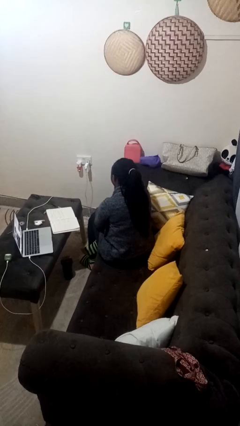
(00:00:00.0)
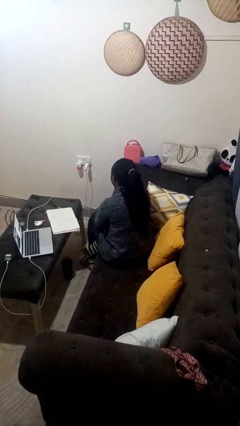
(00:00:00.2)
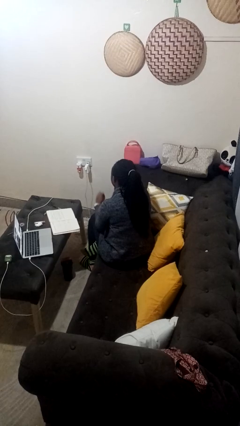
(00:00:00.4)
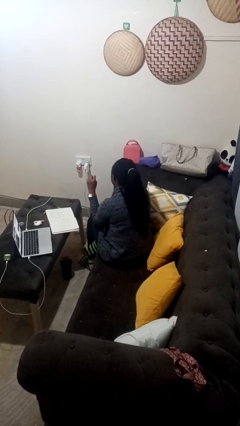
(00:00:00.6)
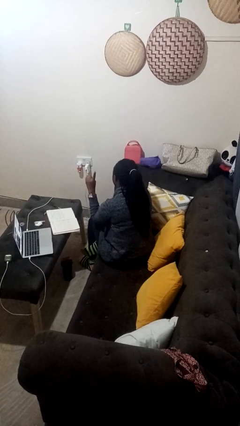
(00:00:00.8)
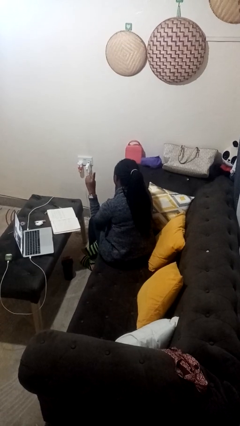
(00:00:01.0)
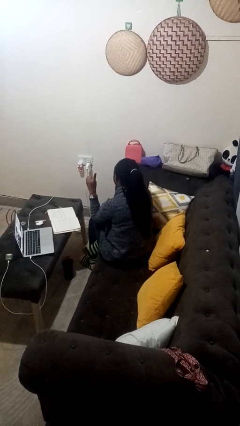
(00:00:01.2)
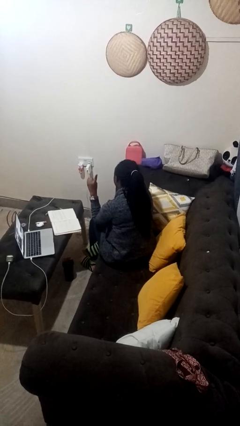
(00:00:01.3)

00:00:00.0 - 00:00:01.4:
person gestures number one

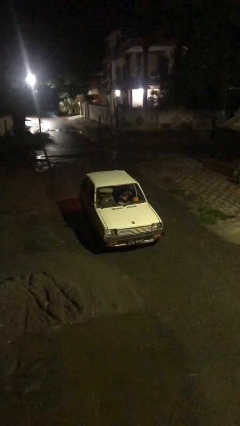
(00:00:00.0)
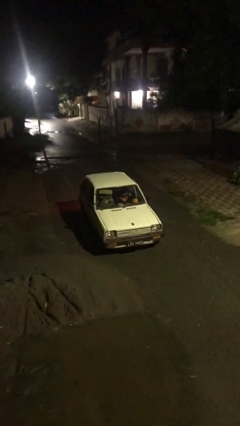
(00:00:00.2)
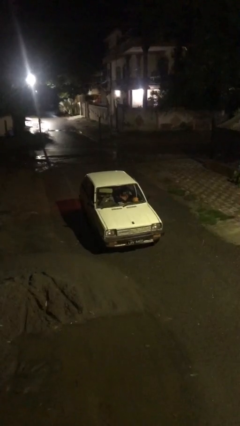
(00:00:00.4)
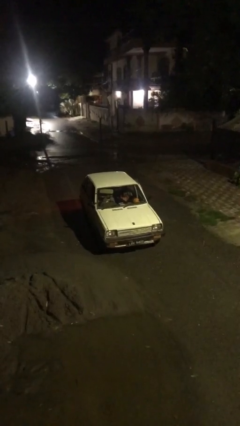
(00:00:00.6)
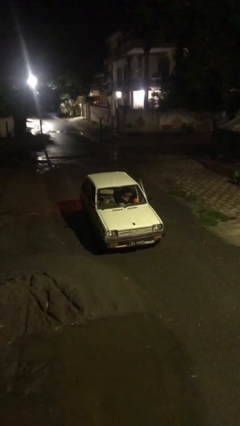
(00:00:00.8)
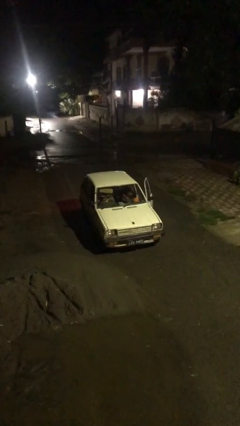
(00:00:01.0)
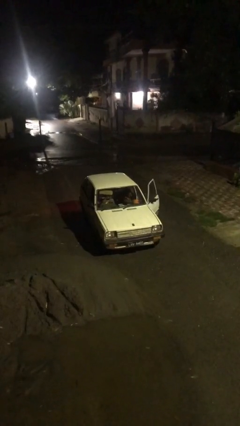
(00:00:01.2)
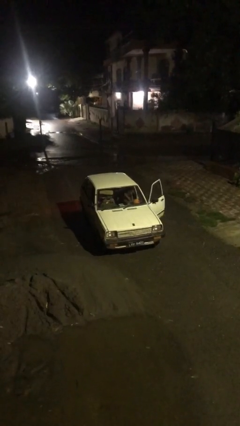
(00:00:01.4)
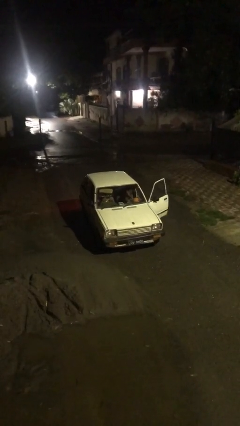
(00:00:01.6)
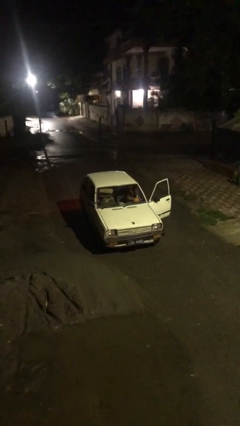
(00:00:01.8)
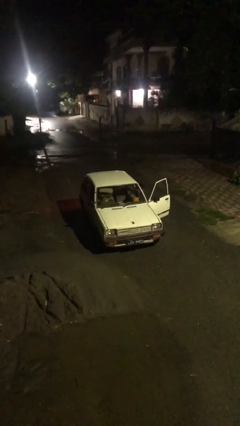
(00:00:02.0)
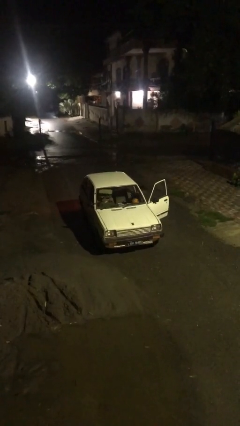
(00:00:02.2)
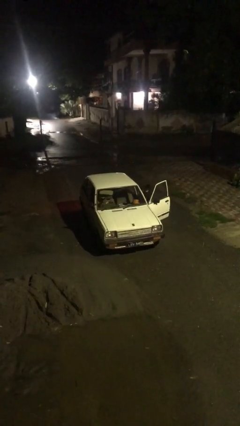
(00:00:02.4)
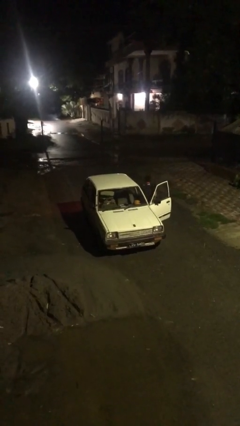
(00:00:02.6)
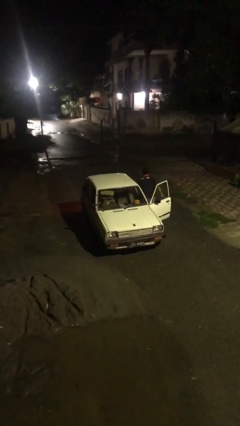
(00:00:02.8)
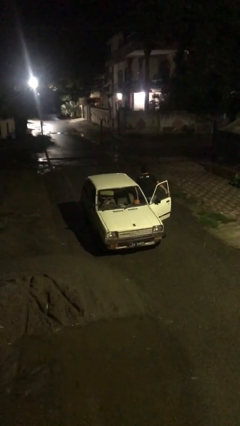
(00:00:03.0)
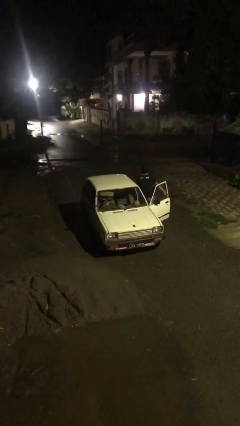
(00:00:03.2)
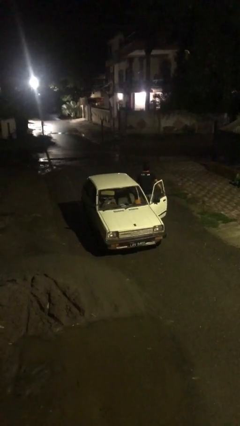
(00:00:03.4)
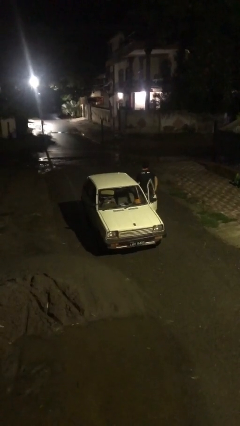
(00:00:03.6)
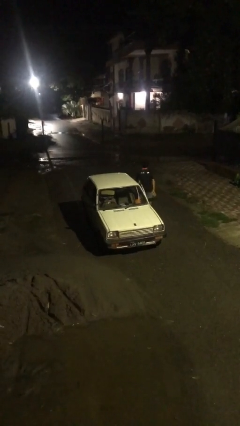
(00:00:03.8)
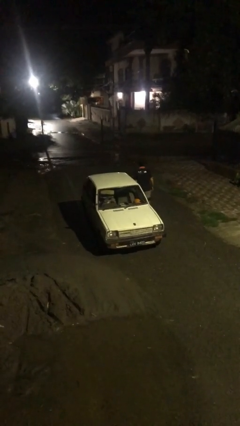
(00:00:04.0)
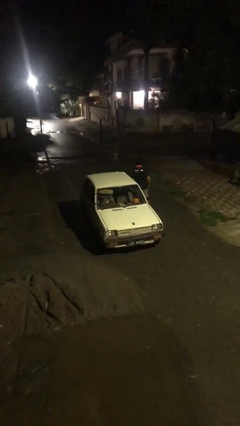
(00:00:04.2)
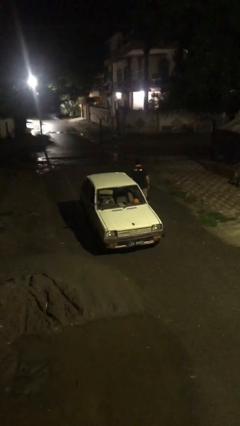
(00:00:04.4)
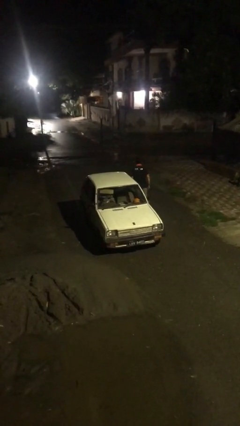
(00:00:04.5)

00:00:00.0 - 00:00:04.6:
car drops off person

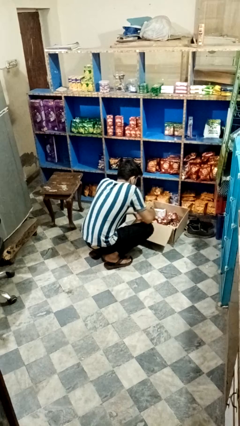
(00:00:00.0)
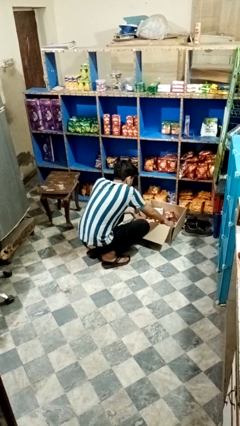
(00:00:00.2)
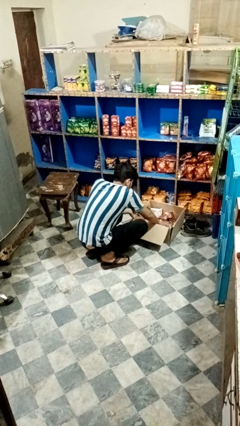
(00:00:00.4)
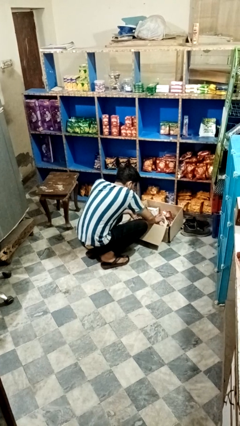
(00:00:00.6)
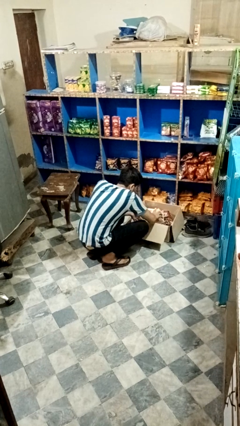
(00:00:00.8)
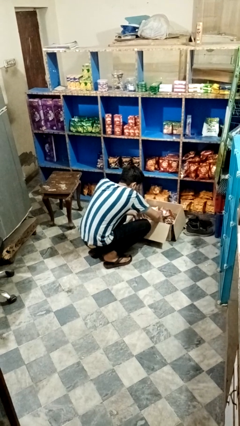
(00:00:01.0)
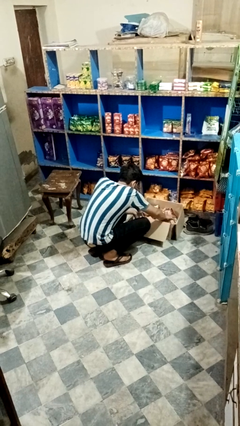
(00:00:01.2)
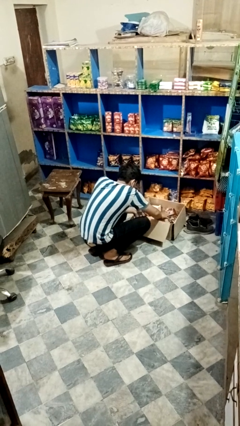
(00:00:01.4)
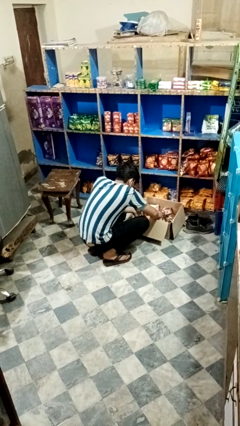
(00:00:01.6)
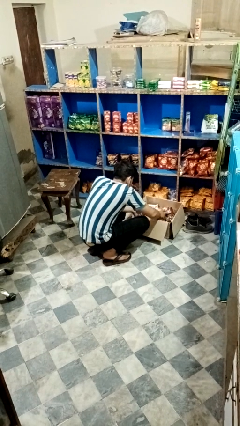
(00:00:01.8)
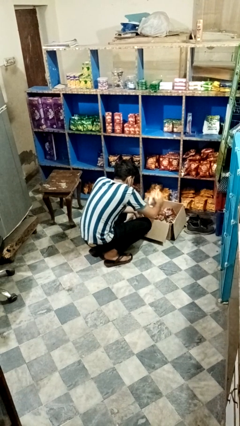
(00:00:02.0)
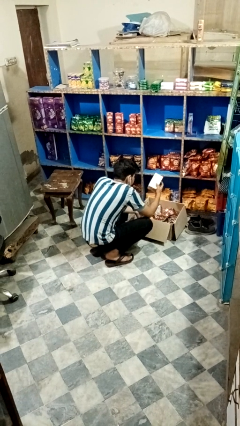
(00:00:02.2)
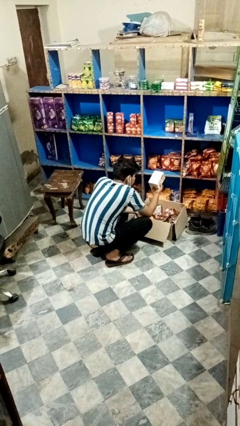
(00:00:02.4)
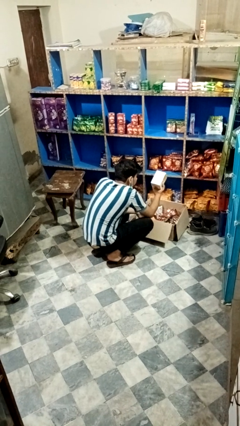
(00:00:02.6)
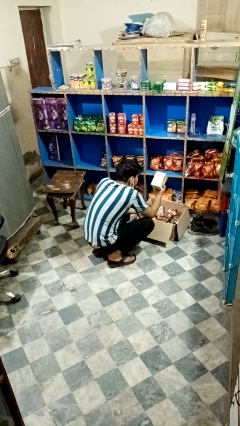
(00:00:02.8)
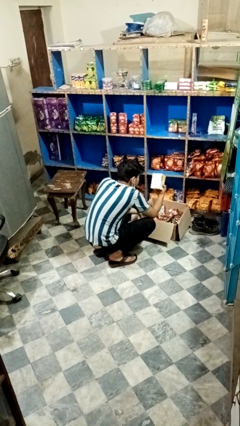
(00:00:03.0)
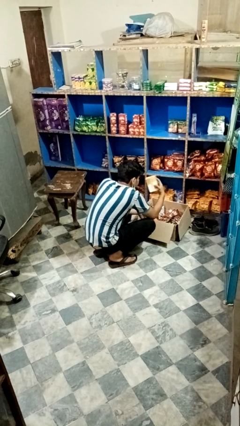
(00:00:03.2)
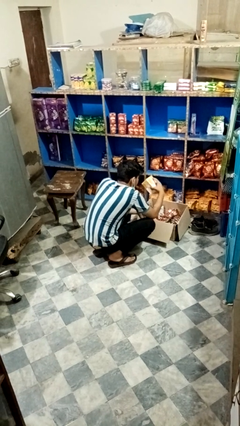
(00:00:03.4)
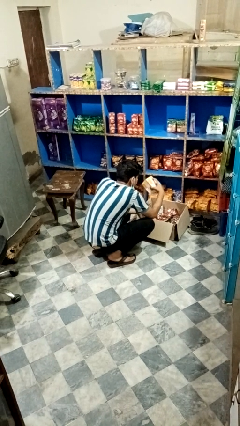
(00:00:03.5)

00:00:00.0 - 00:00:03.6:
person searches in box

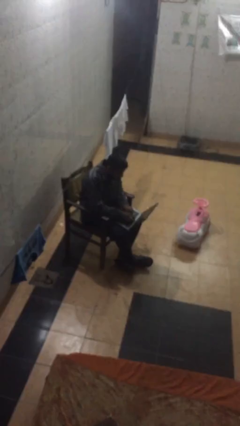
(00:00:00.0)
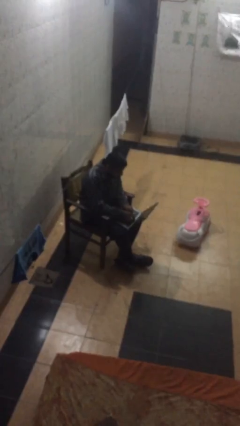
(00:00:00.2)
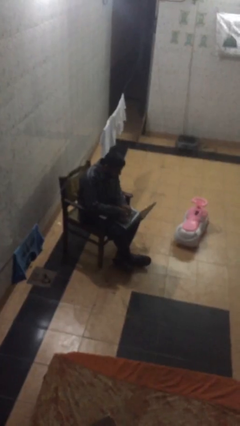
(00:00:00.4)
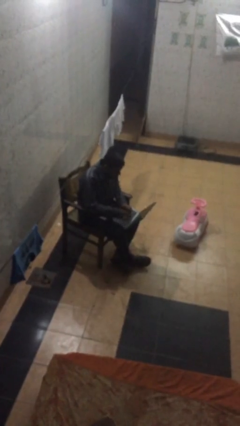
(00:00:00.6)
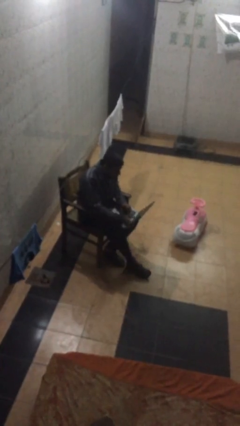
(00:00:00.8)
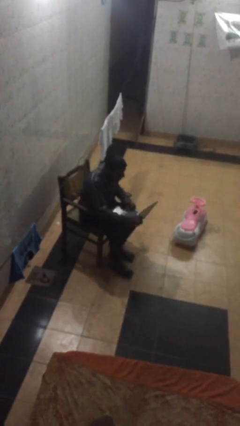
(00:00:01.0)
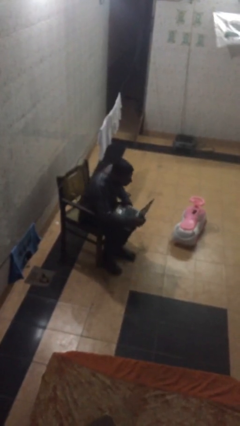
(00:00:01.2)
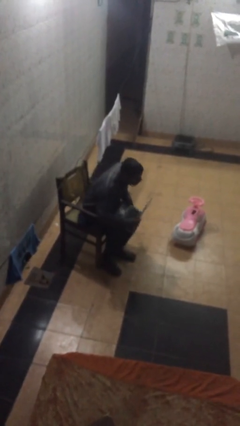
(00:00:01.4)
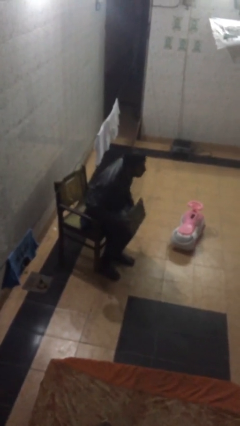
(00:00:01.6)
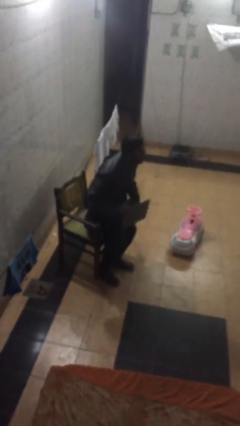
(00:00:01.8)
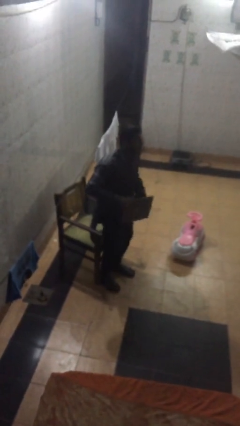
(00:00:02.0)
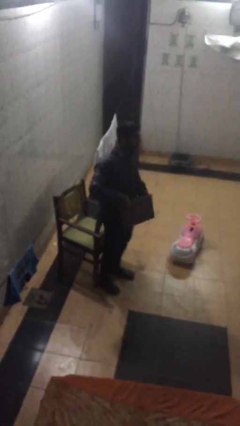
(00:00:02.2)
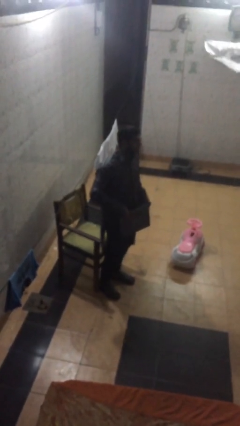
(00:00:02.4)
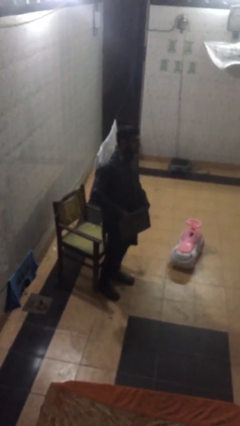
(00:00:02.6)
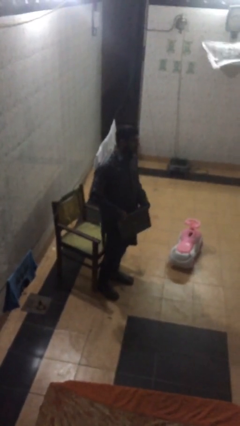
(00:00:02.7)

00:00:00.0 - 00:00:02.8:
person stands up

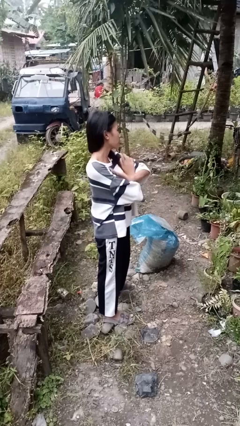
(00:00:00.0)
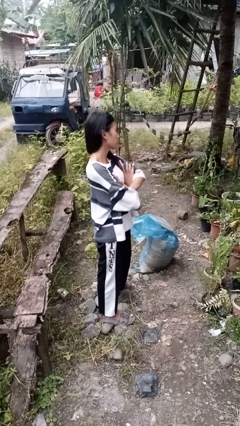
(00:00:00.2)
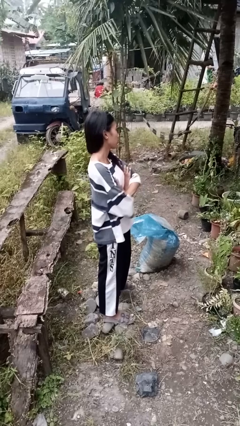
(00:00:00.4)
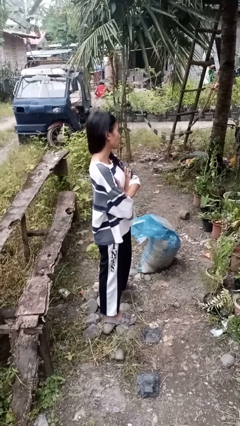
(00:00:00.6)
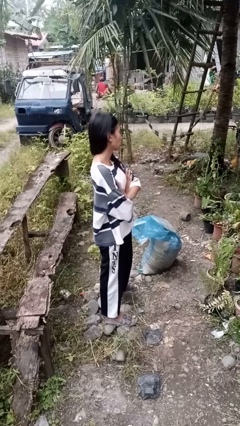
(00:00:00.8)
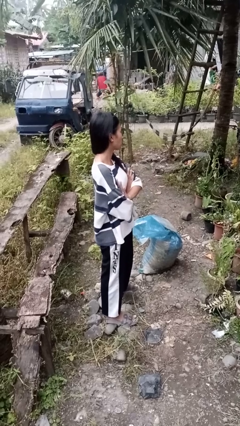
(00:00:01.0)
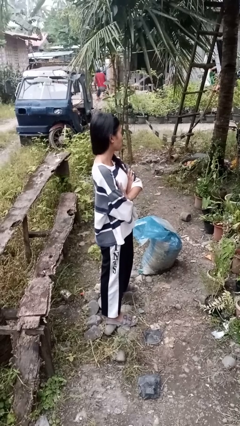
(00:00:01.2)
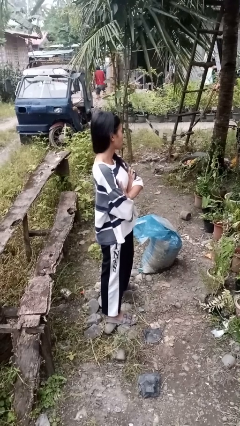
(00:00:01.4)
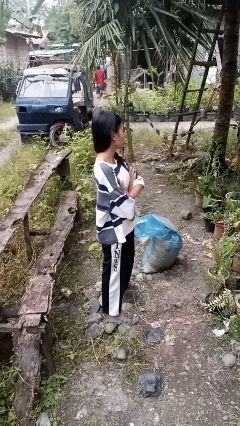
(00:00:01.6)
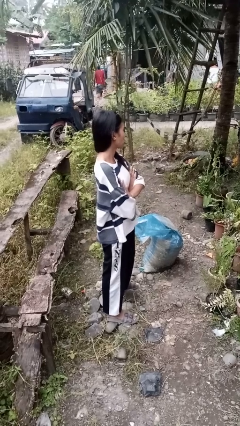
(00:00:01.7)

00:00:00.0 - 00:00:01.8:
person crosses arms

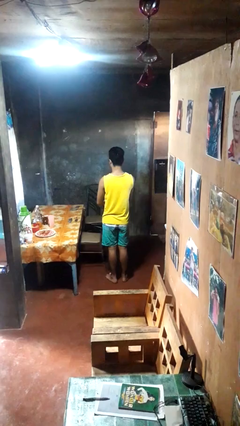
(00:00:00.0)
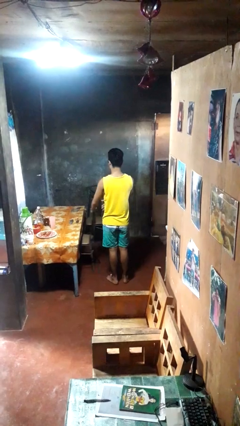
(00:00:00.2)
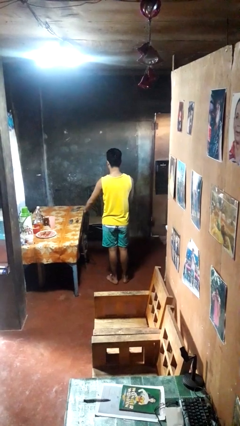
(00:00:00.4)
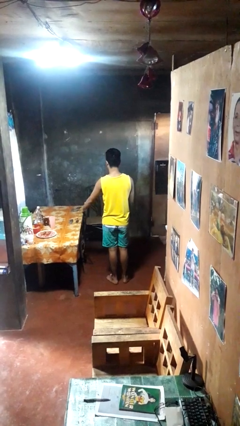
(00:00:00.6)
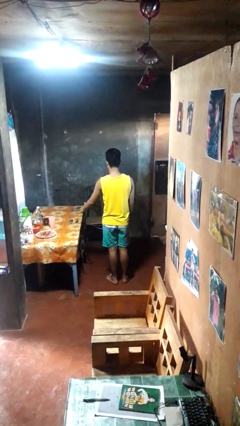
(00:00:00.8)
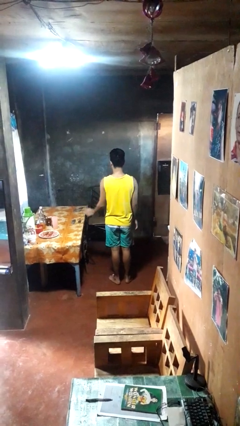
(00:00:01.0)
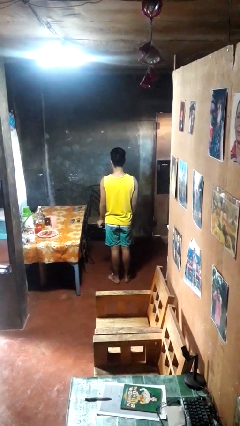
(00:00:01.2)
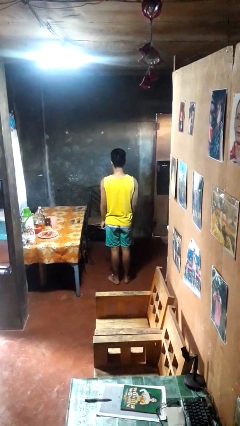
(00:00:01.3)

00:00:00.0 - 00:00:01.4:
person pushes in chair

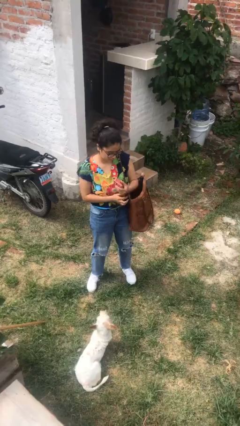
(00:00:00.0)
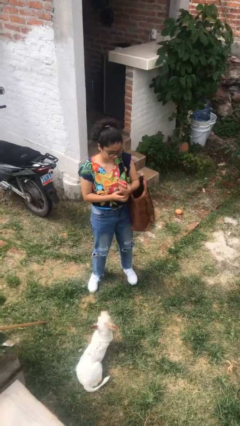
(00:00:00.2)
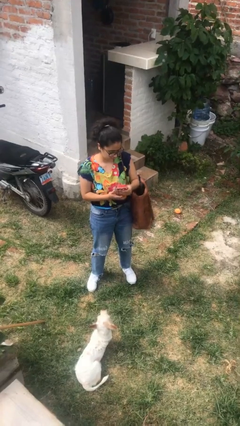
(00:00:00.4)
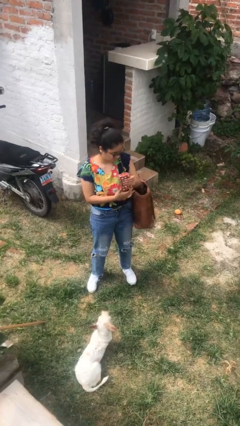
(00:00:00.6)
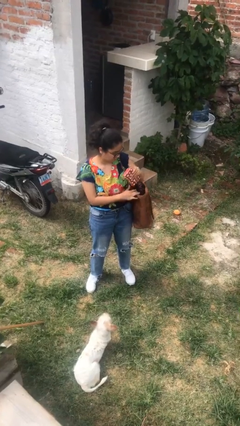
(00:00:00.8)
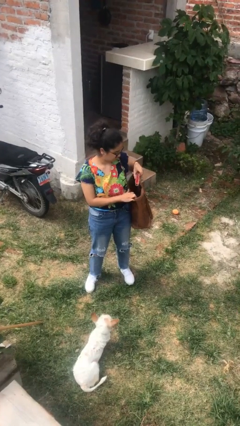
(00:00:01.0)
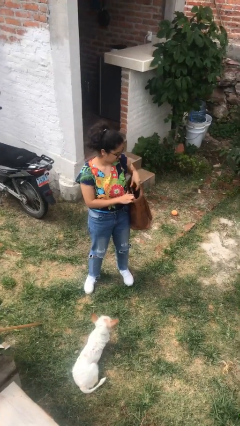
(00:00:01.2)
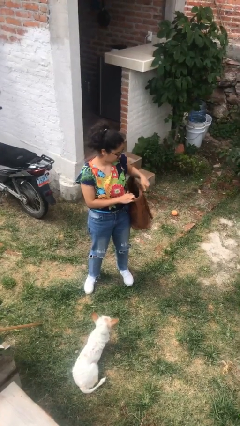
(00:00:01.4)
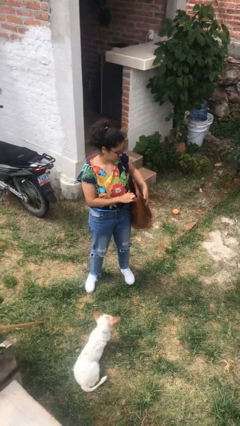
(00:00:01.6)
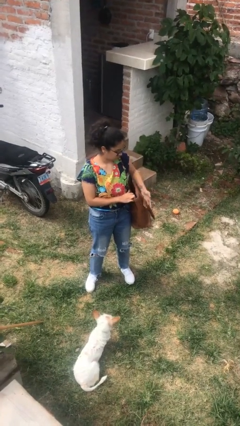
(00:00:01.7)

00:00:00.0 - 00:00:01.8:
person puts object into purse
